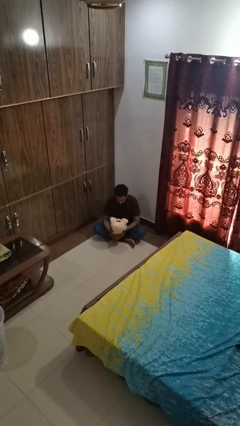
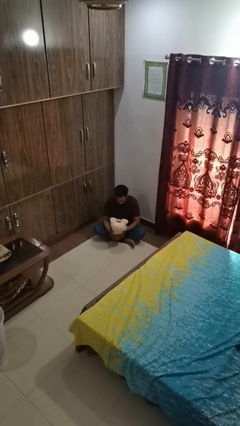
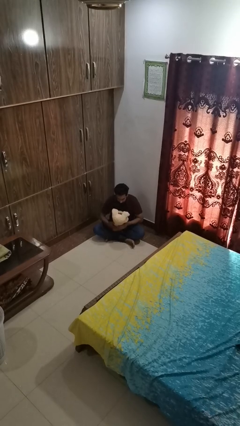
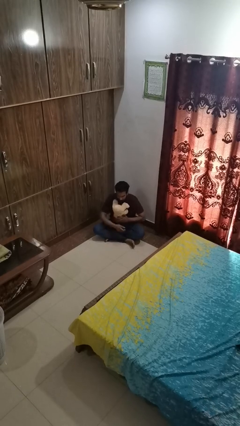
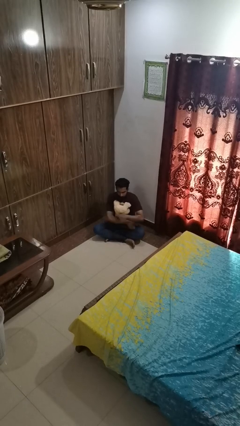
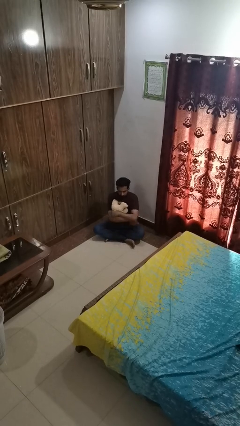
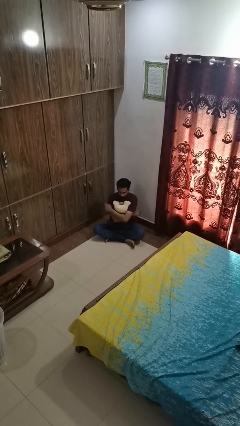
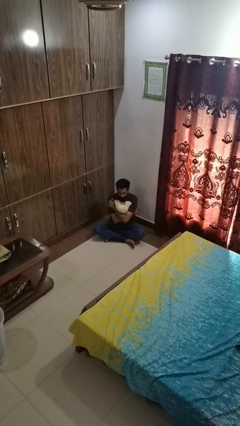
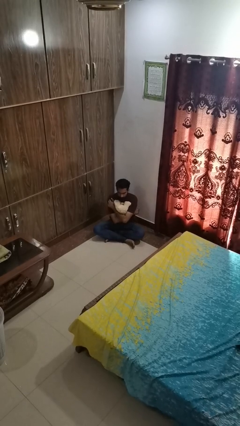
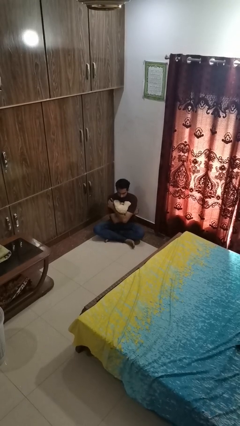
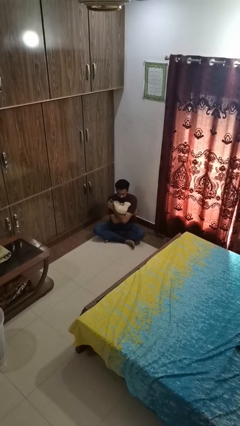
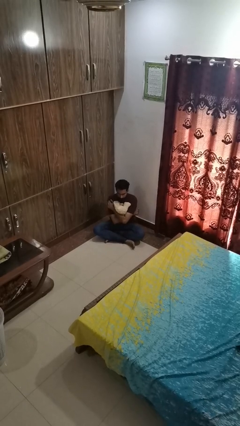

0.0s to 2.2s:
person hugs stuffed animal

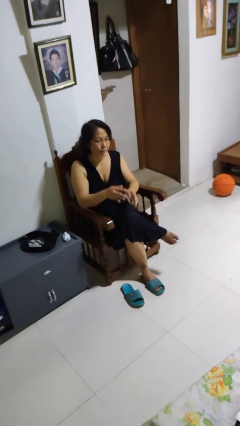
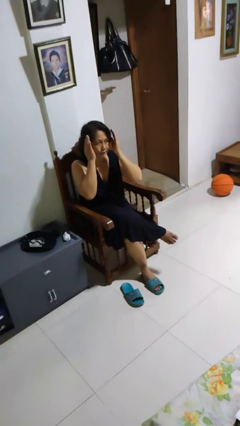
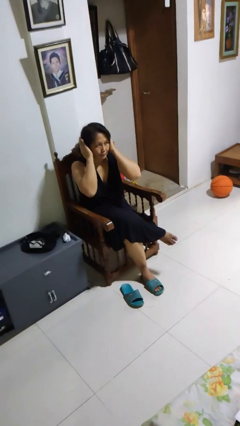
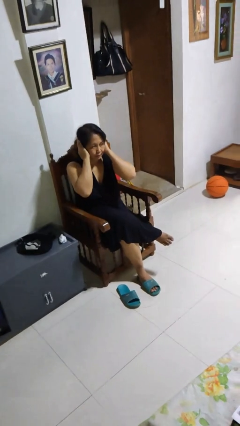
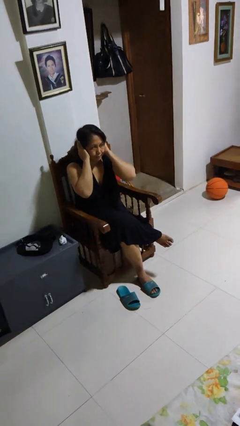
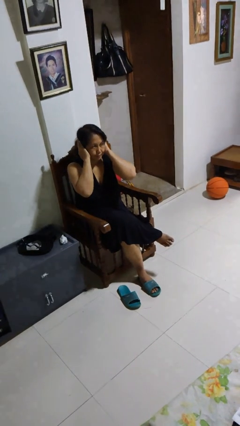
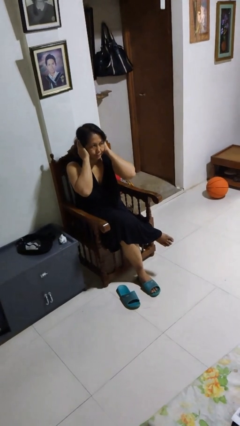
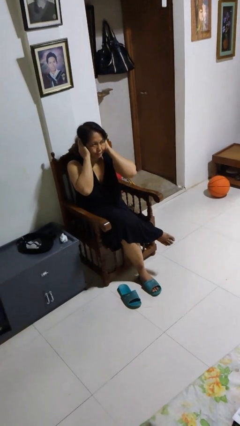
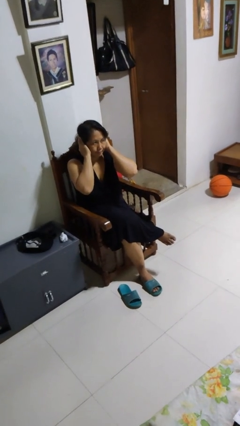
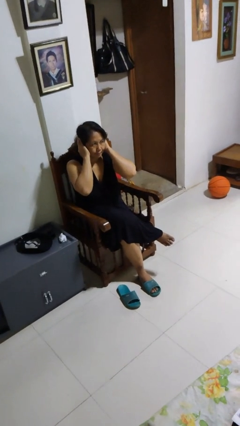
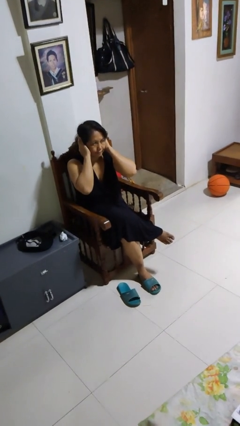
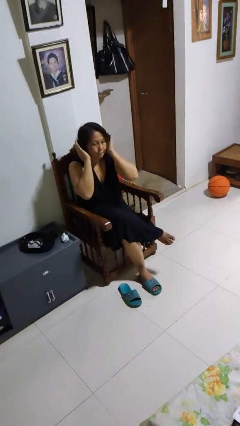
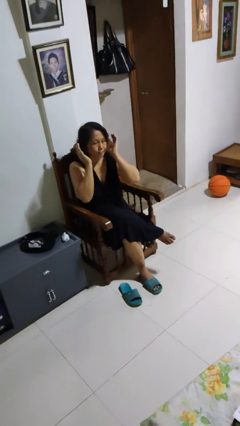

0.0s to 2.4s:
person puts fingers in ear

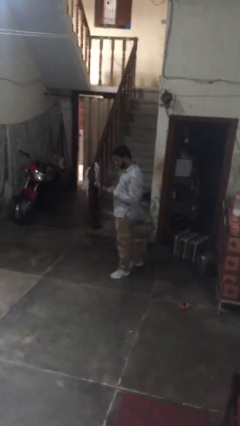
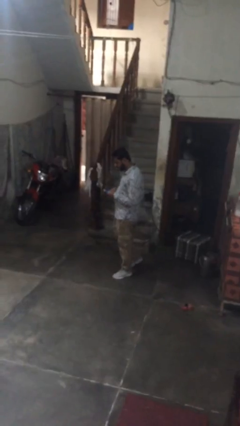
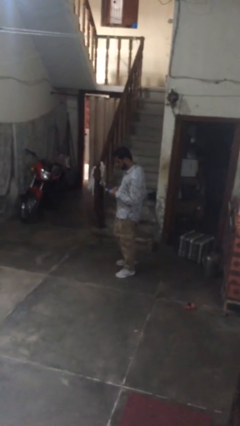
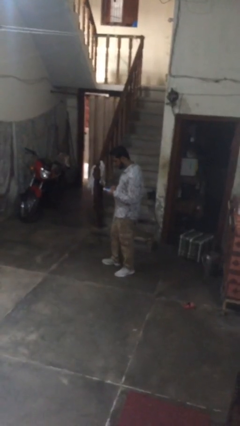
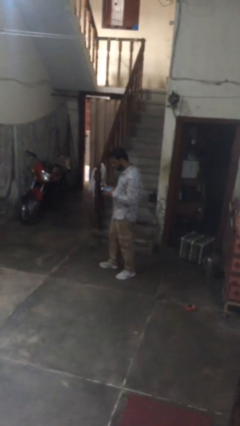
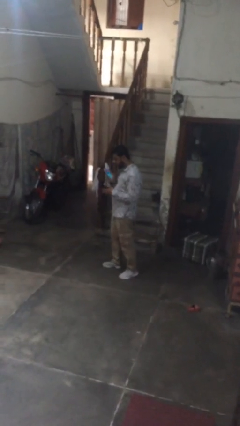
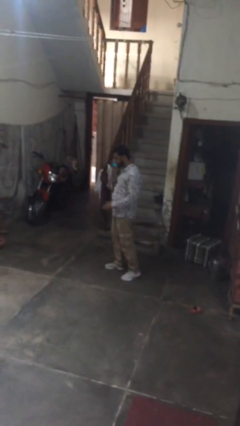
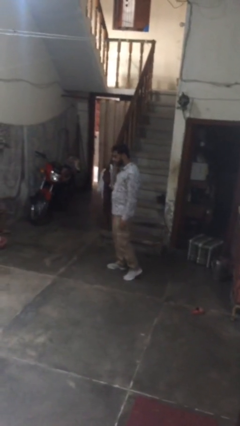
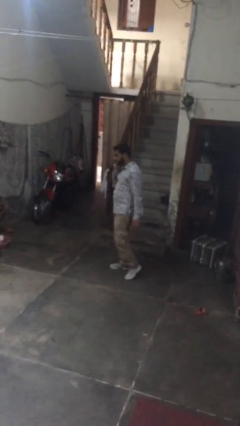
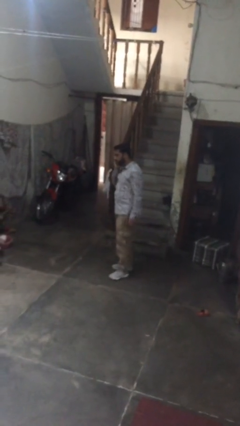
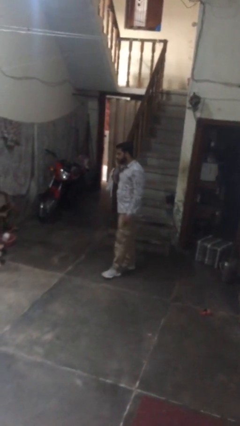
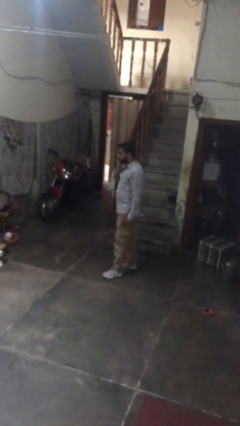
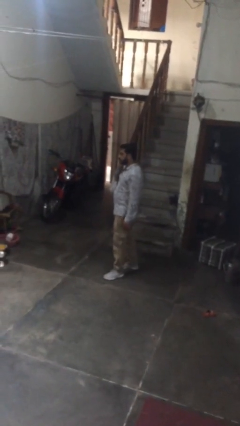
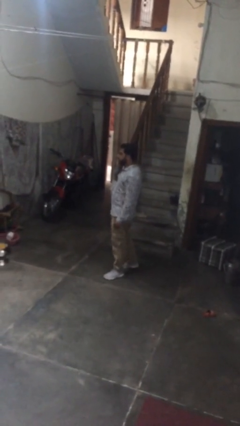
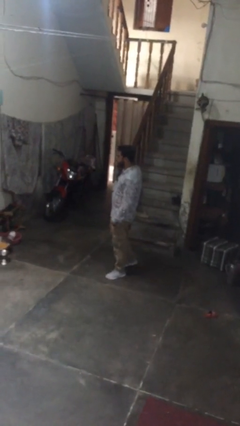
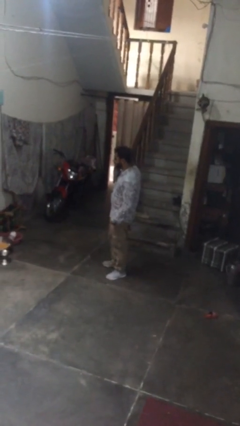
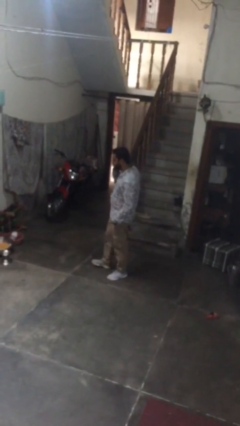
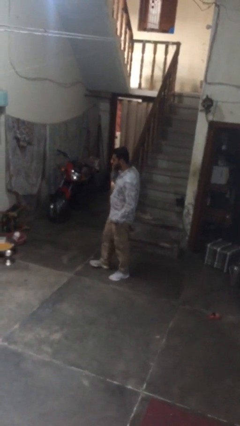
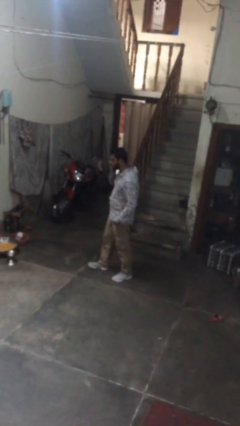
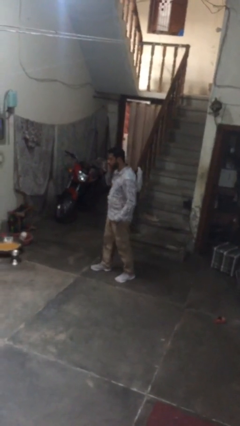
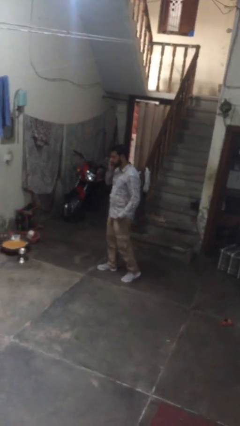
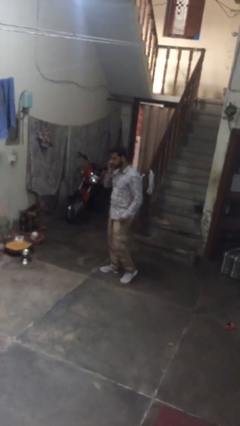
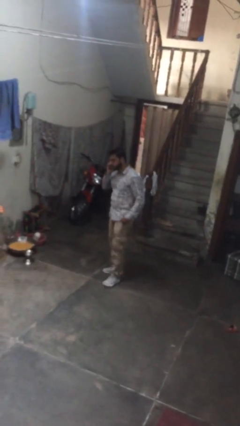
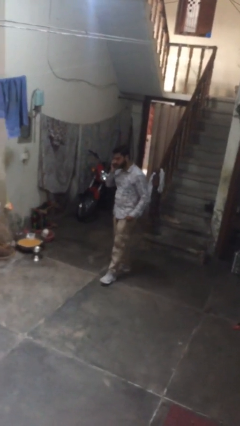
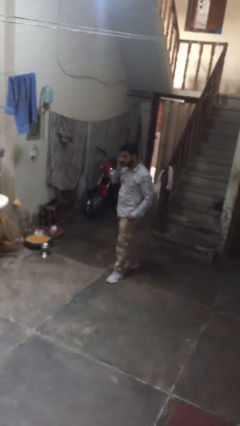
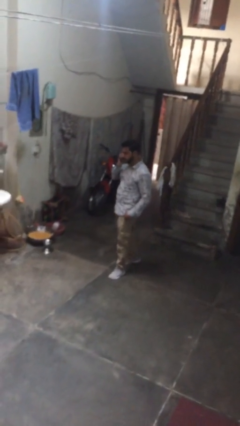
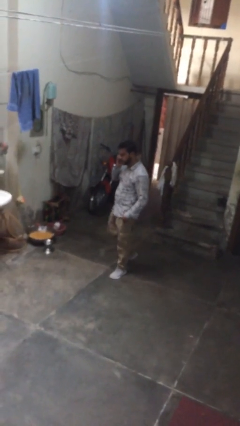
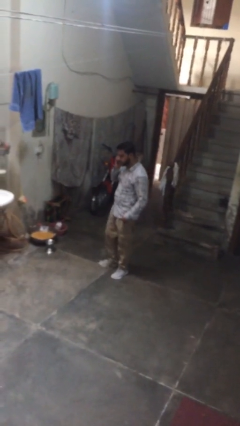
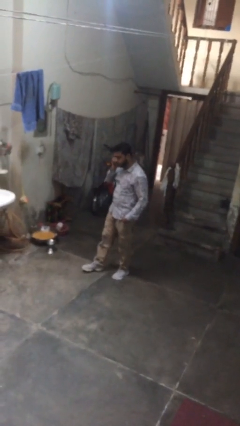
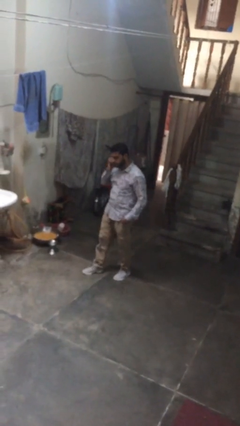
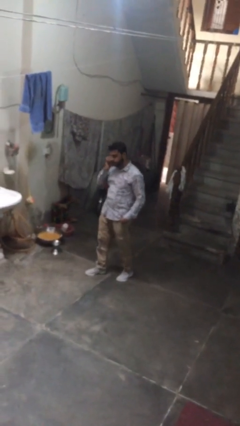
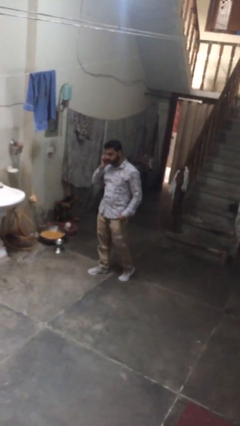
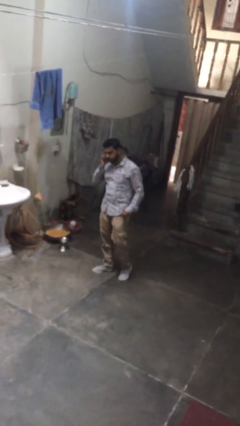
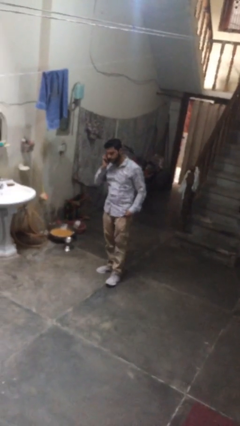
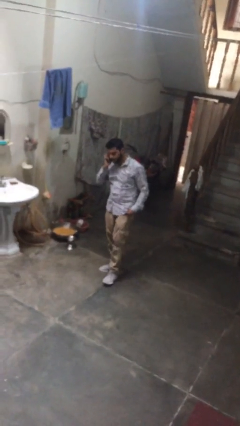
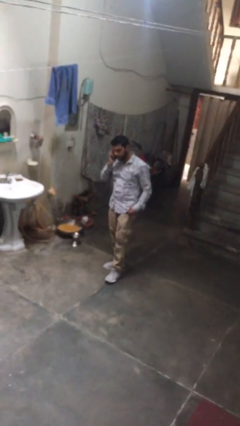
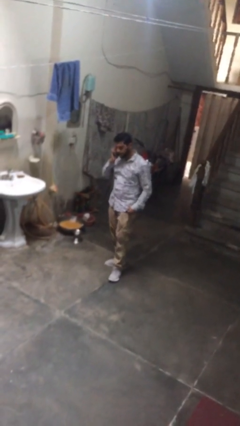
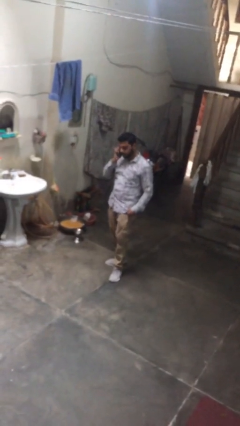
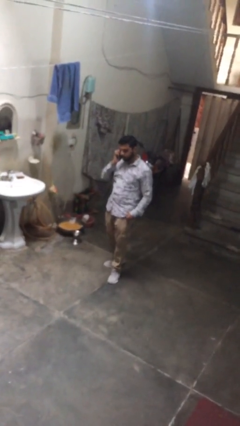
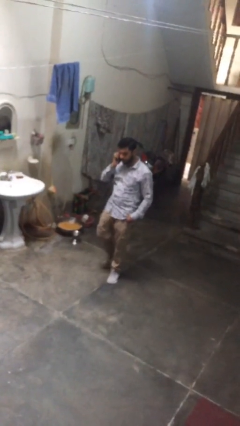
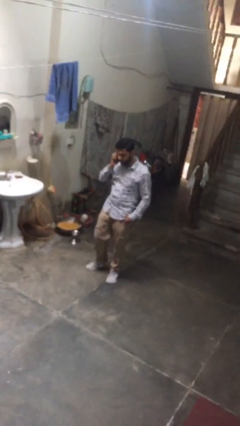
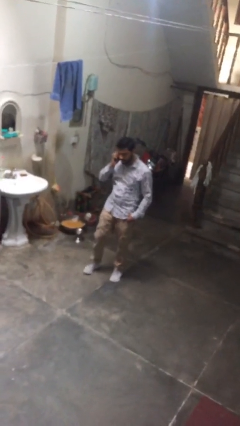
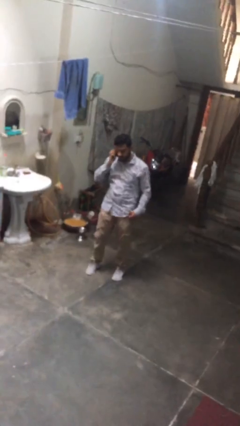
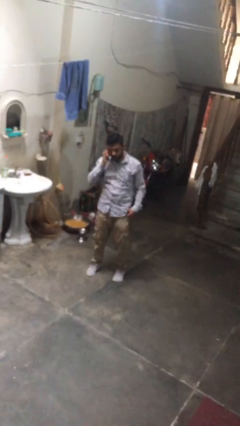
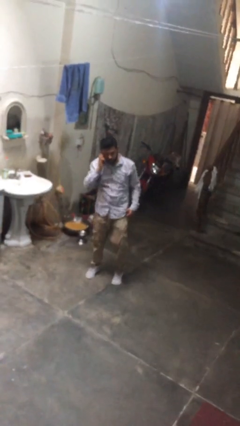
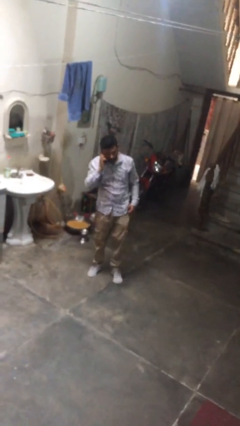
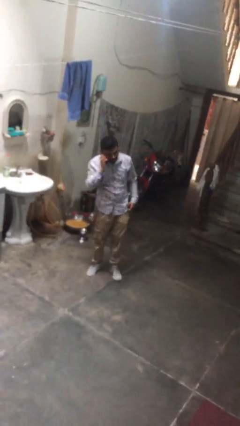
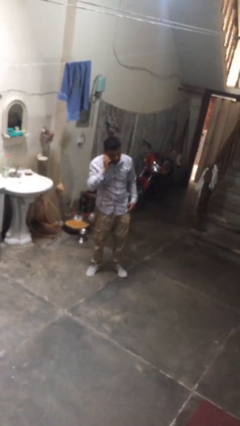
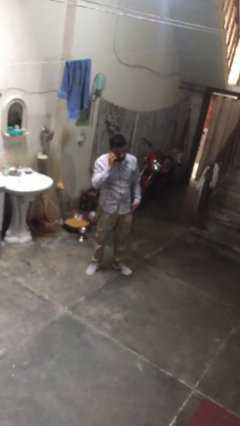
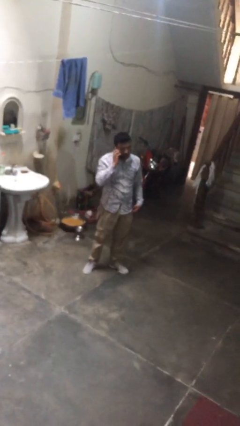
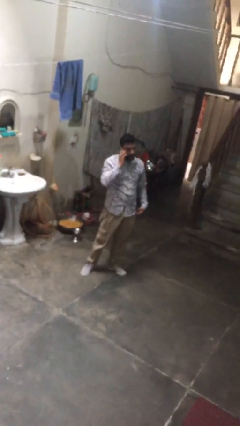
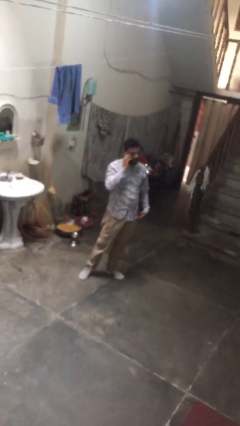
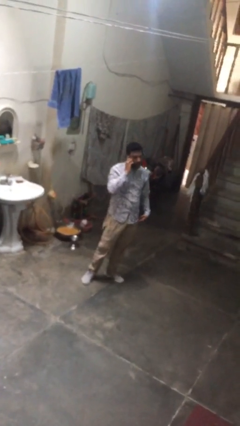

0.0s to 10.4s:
person talks on phone

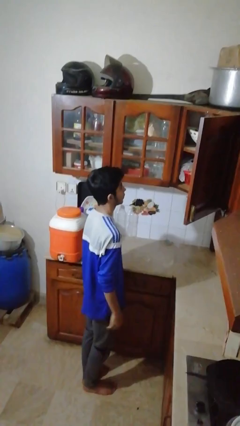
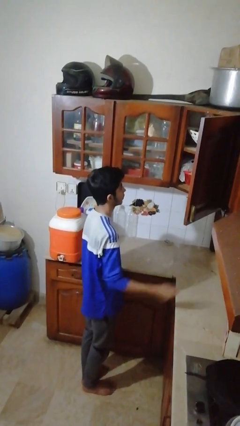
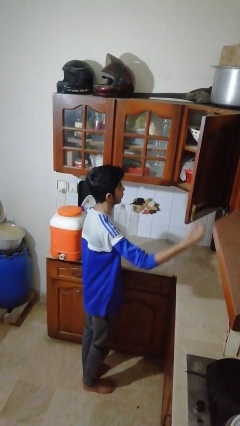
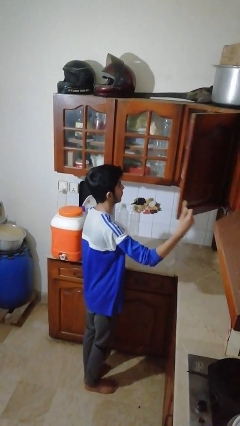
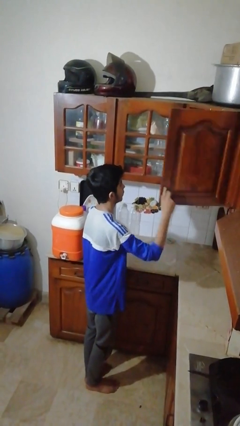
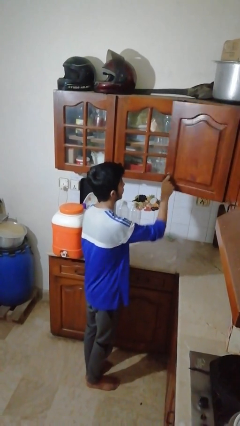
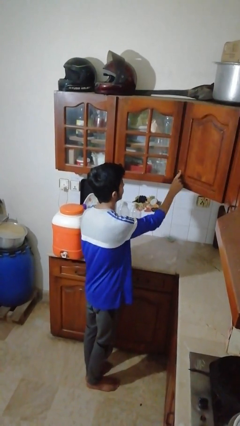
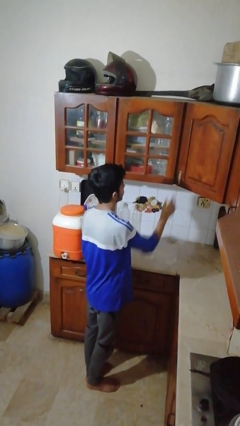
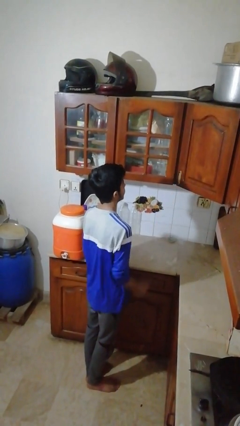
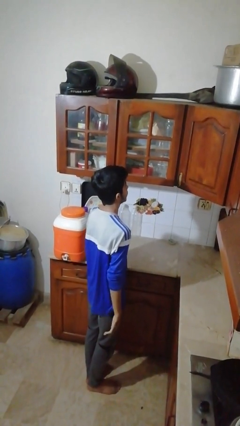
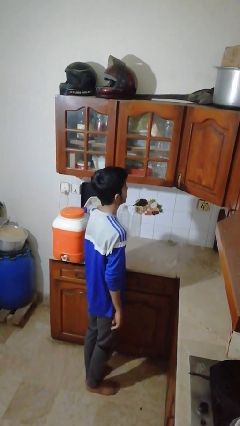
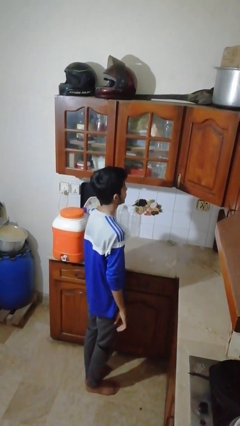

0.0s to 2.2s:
person closes cabinet

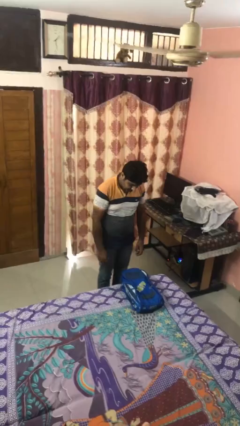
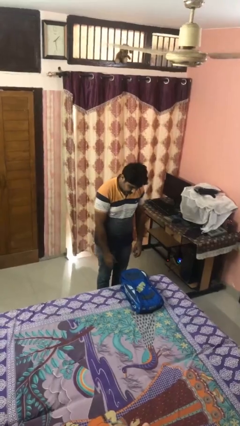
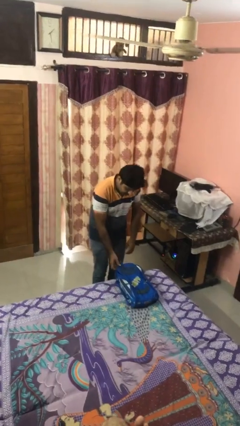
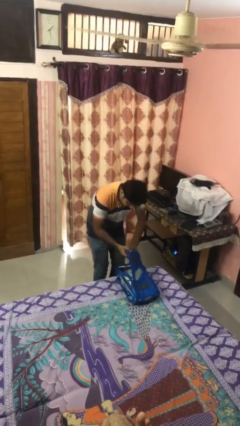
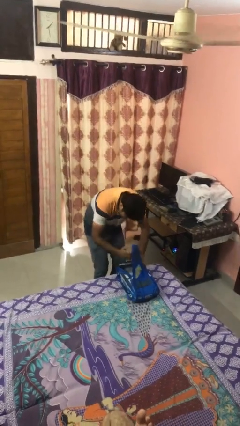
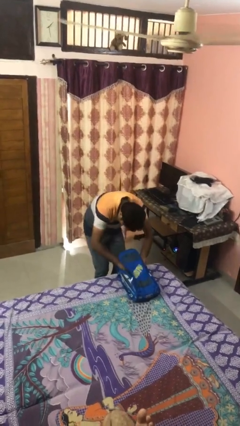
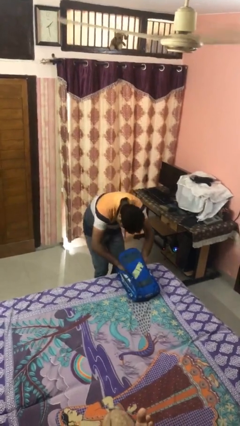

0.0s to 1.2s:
person searches in backpack
